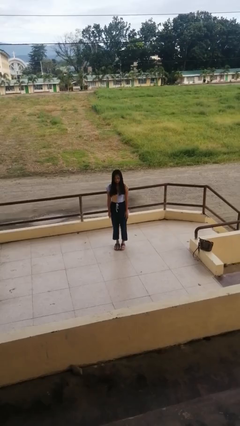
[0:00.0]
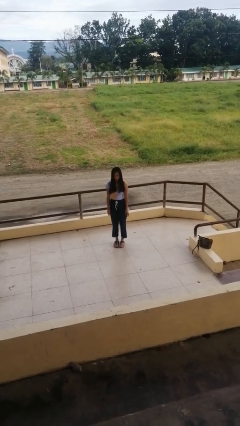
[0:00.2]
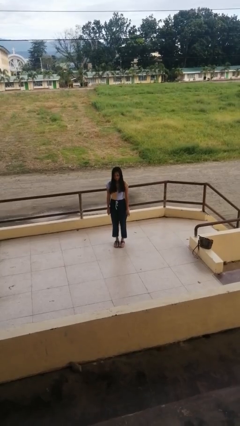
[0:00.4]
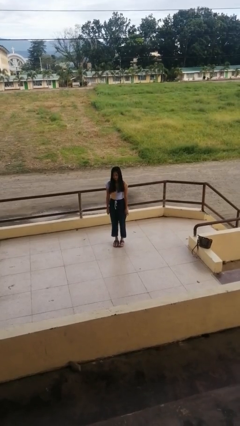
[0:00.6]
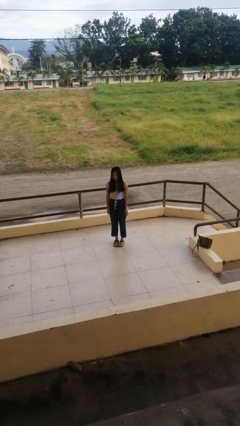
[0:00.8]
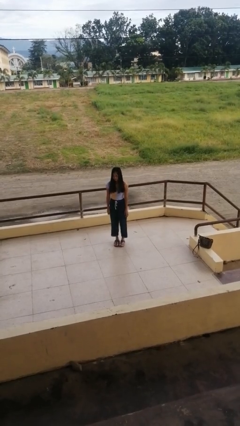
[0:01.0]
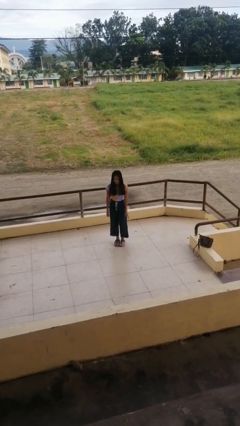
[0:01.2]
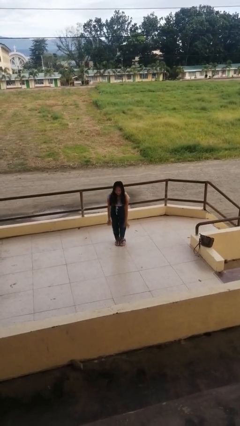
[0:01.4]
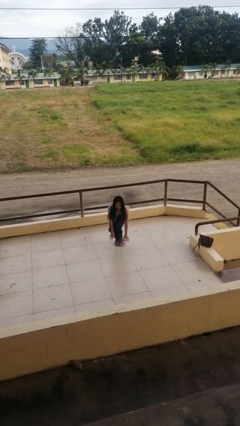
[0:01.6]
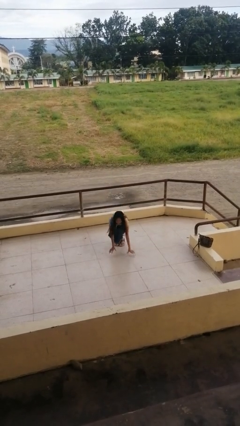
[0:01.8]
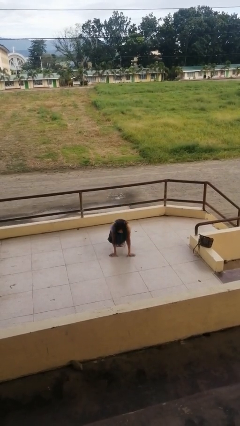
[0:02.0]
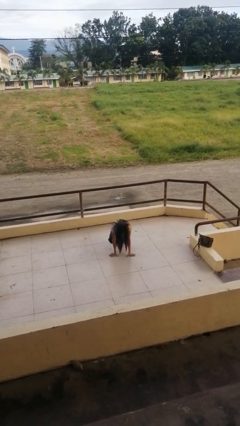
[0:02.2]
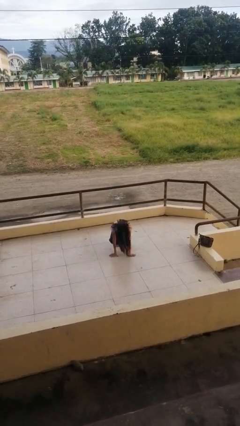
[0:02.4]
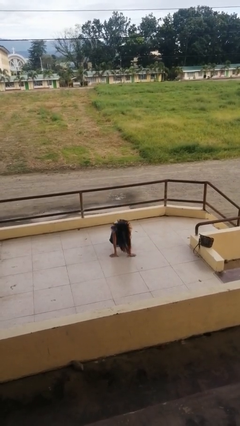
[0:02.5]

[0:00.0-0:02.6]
person falls while standing

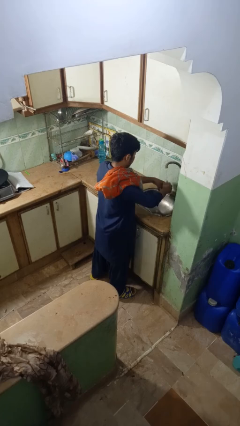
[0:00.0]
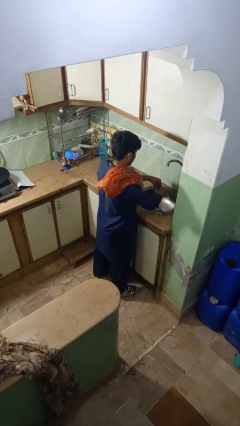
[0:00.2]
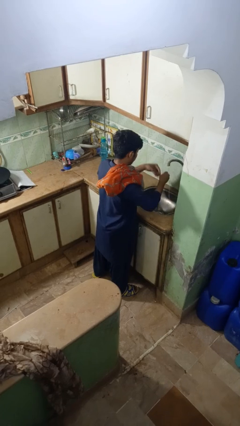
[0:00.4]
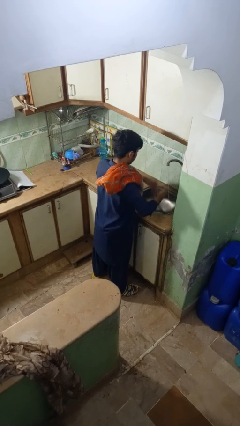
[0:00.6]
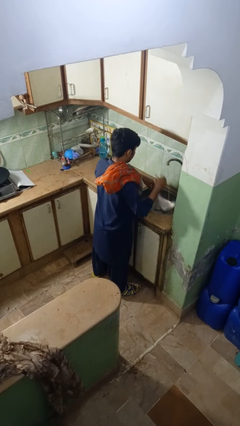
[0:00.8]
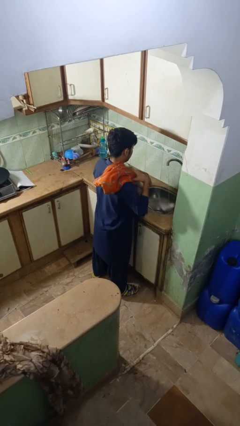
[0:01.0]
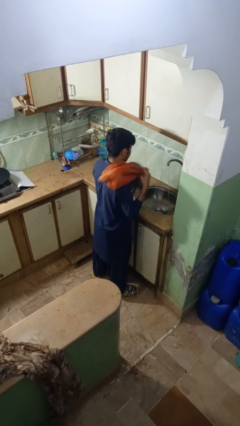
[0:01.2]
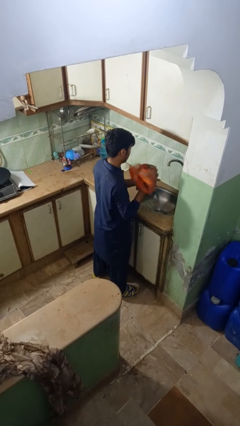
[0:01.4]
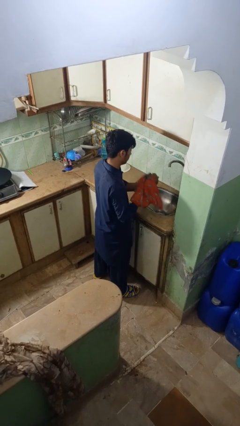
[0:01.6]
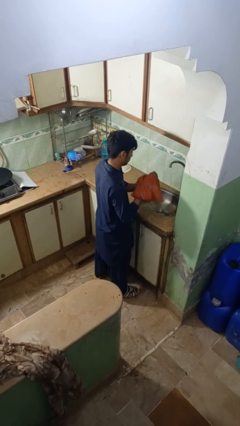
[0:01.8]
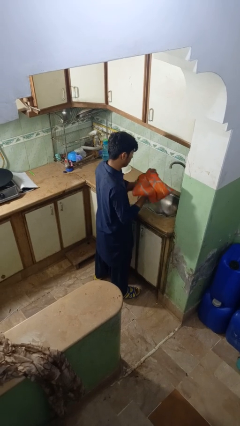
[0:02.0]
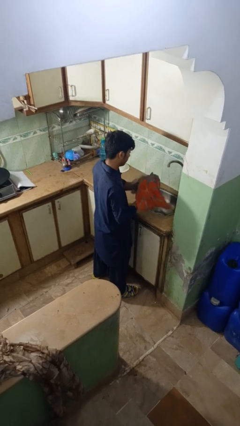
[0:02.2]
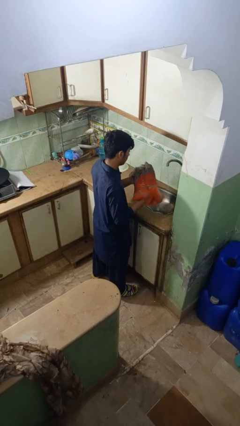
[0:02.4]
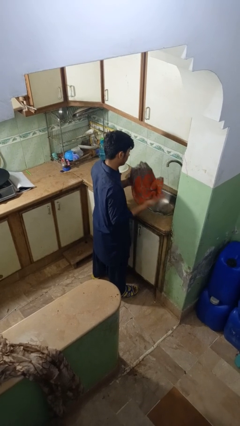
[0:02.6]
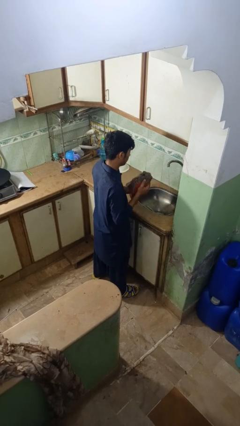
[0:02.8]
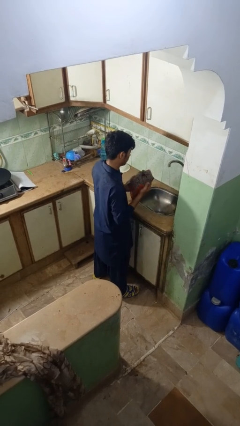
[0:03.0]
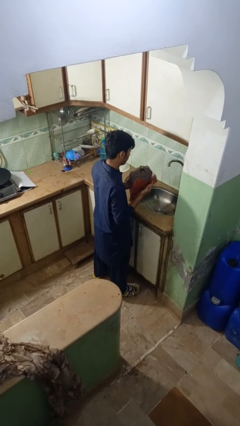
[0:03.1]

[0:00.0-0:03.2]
person dries hands with towel

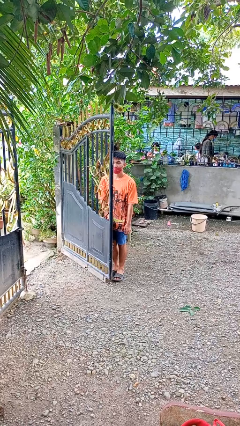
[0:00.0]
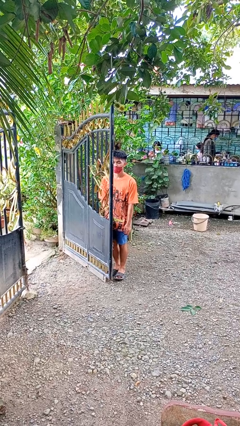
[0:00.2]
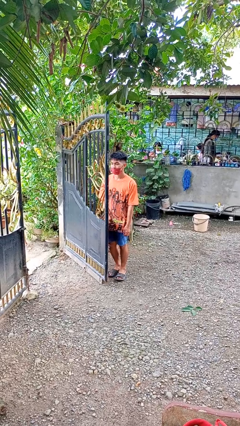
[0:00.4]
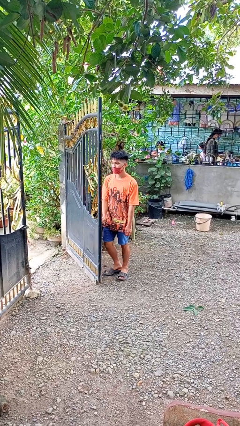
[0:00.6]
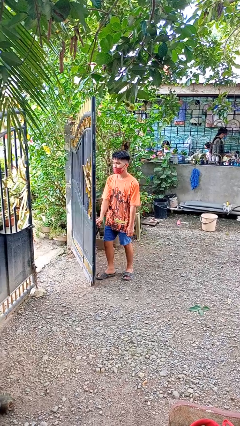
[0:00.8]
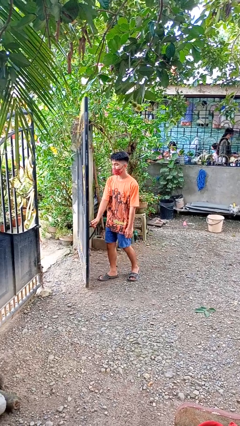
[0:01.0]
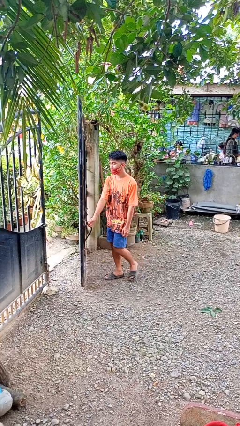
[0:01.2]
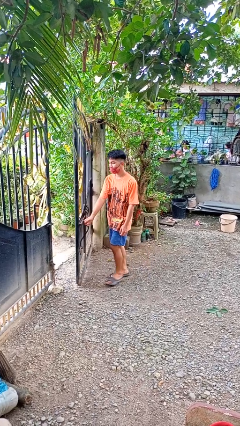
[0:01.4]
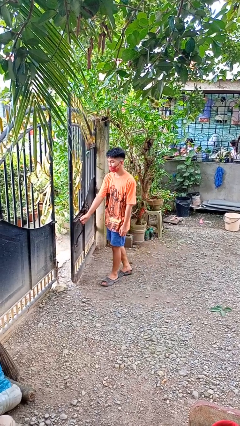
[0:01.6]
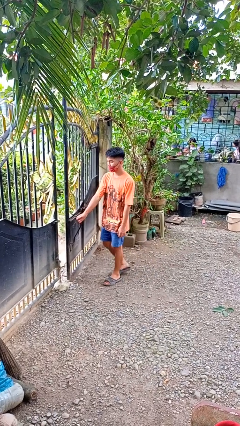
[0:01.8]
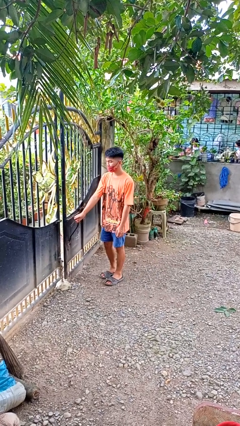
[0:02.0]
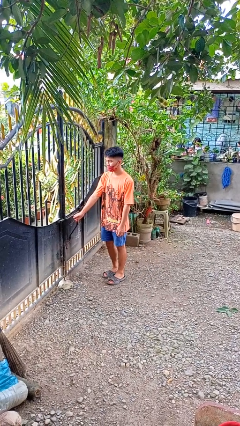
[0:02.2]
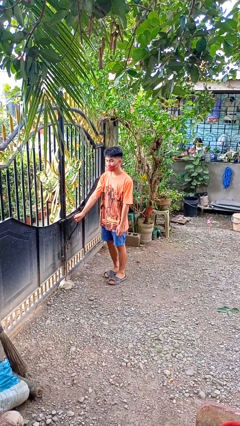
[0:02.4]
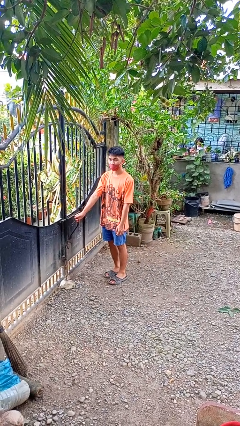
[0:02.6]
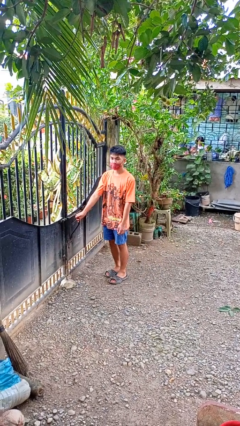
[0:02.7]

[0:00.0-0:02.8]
person closes gate

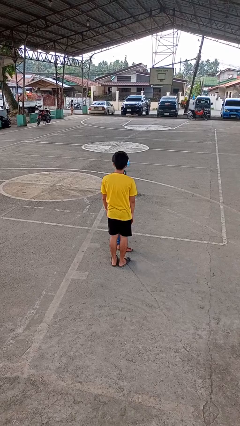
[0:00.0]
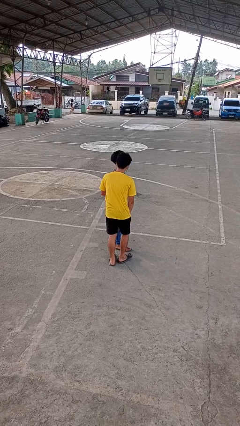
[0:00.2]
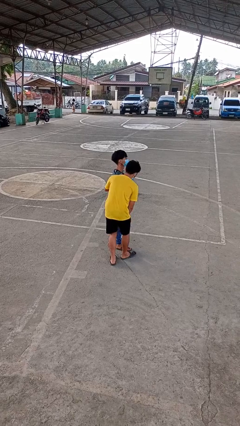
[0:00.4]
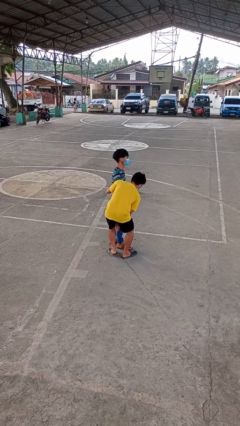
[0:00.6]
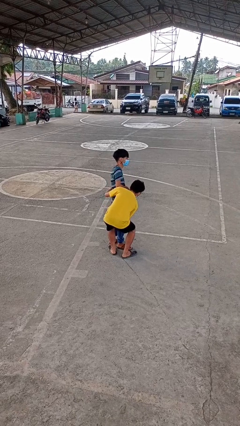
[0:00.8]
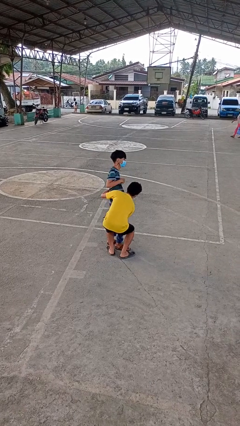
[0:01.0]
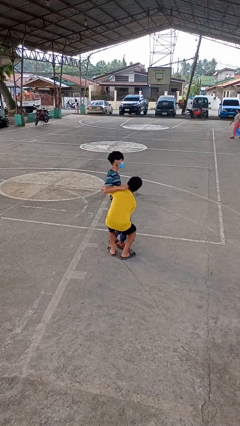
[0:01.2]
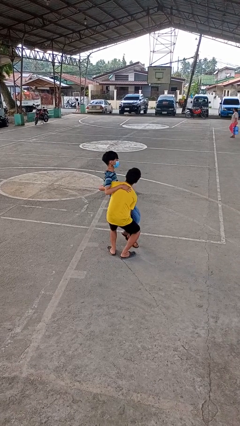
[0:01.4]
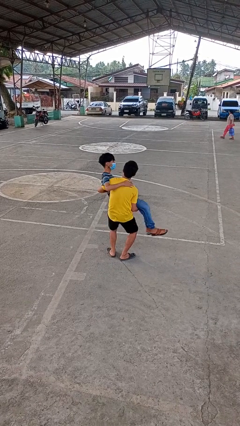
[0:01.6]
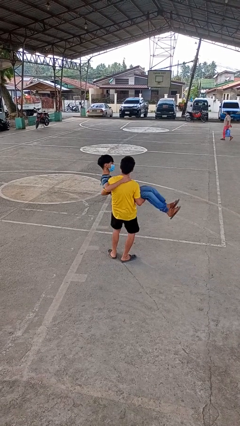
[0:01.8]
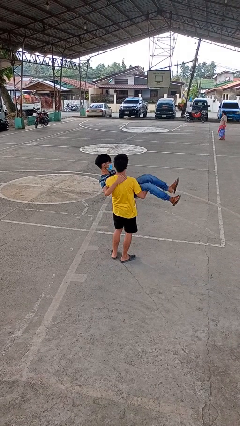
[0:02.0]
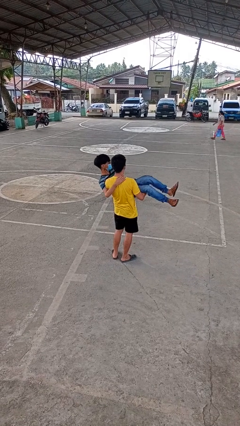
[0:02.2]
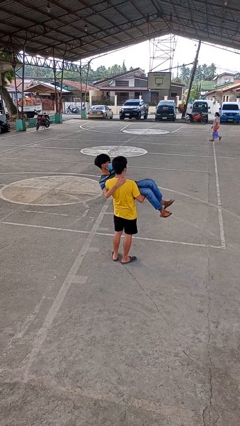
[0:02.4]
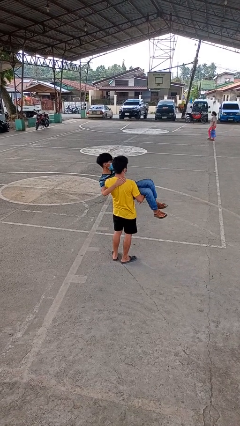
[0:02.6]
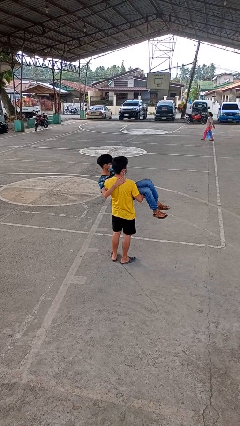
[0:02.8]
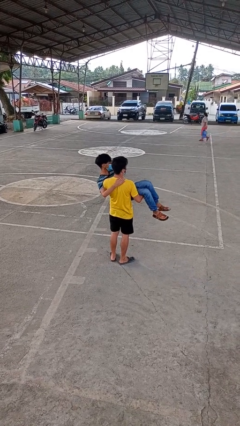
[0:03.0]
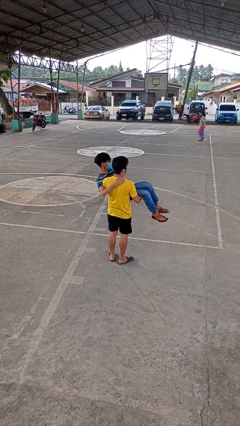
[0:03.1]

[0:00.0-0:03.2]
person picks up person

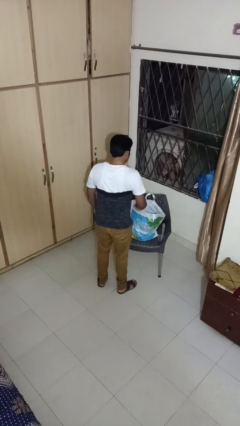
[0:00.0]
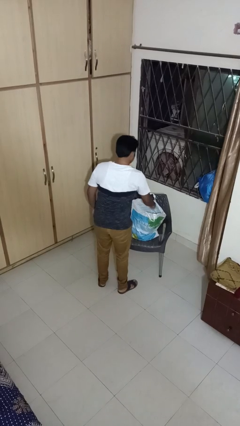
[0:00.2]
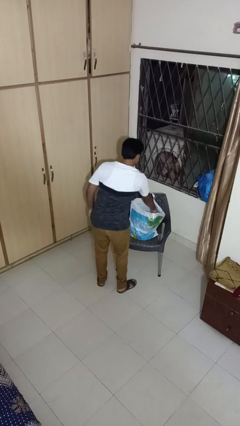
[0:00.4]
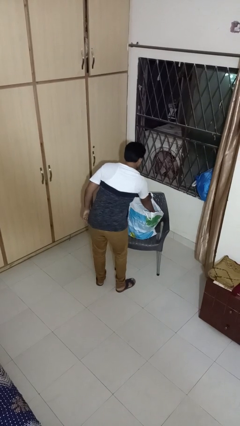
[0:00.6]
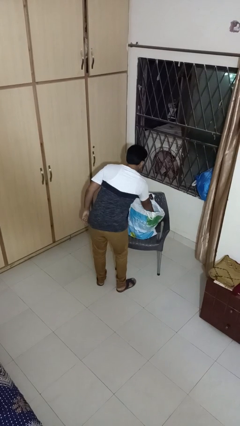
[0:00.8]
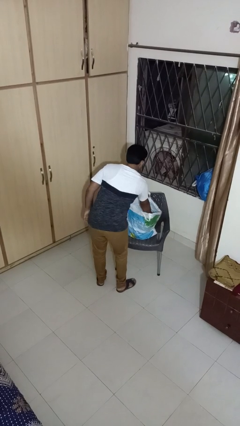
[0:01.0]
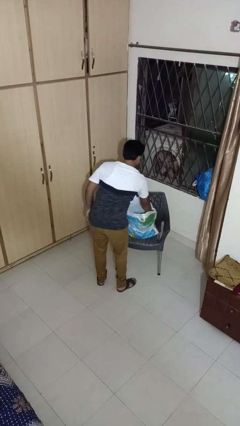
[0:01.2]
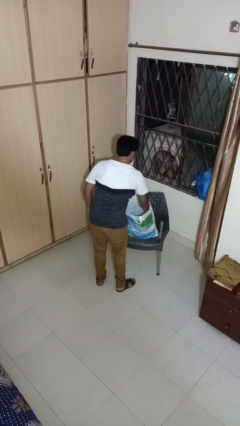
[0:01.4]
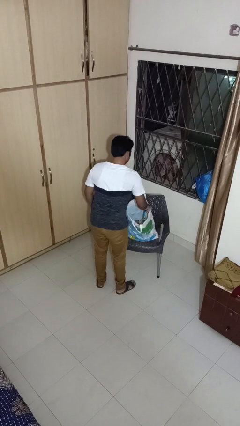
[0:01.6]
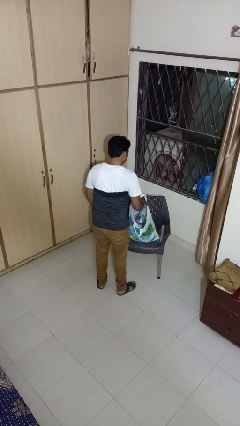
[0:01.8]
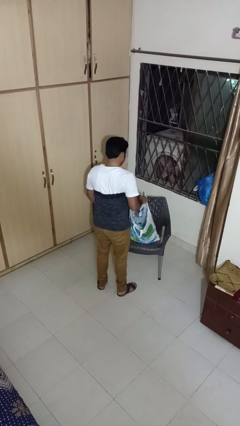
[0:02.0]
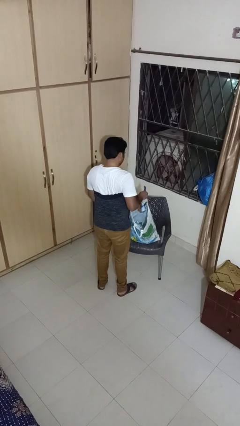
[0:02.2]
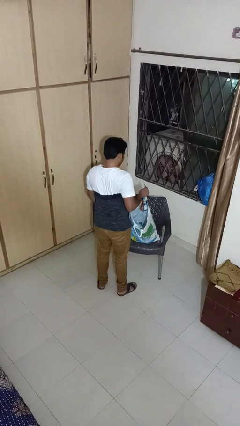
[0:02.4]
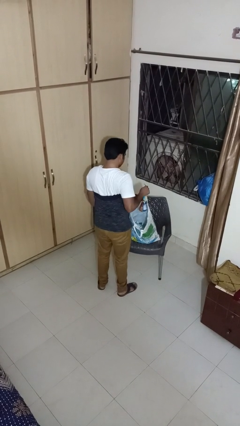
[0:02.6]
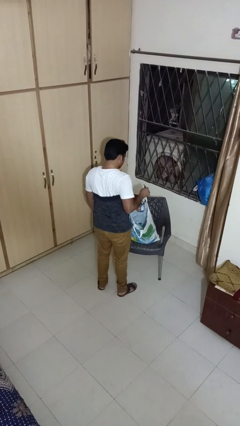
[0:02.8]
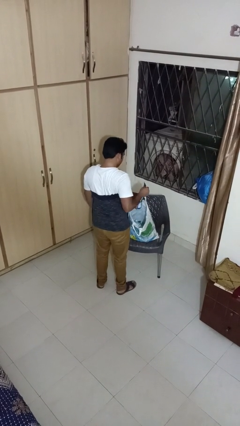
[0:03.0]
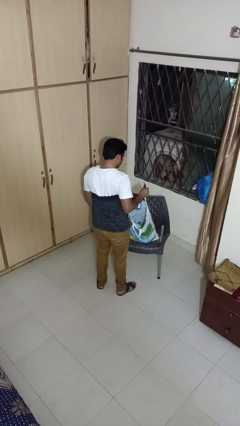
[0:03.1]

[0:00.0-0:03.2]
person takes object from bag

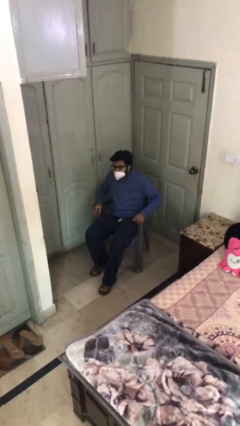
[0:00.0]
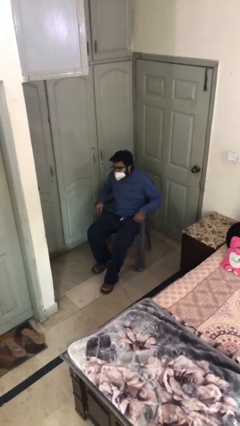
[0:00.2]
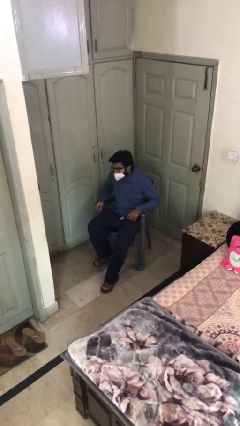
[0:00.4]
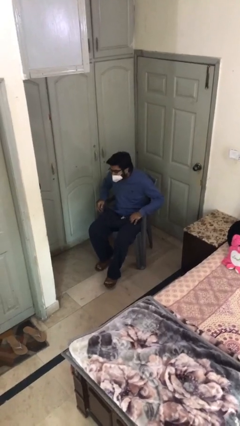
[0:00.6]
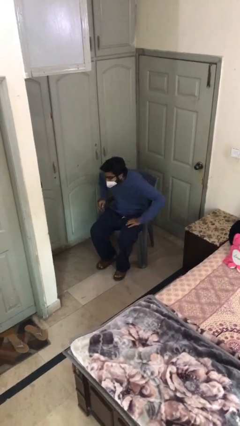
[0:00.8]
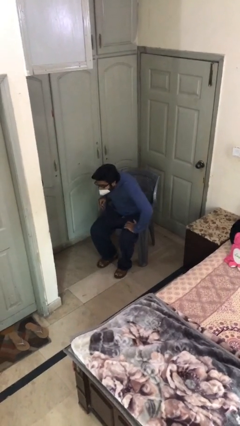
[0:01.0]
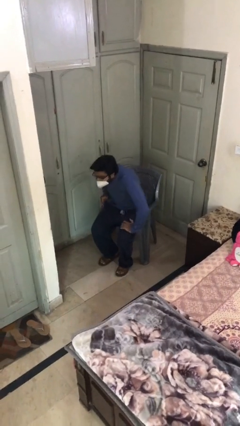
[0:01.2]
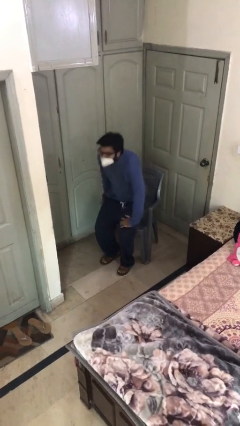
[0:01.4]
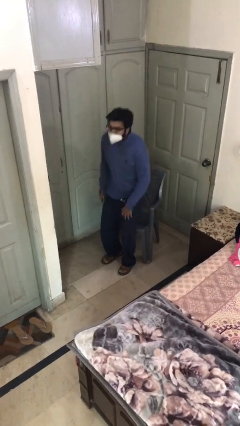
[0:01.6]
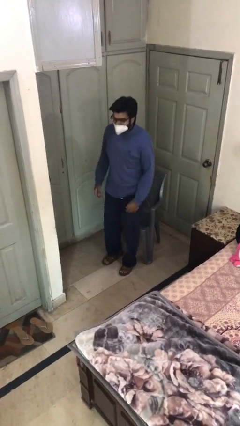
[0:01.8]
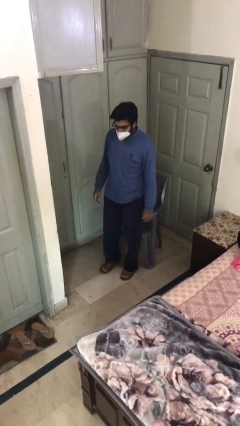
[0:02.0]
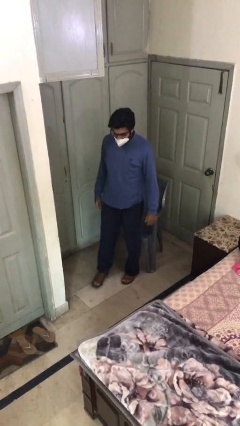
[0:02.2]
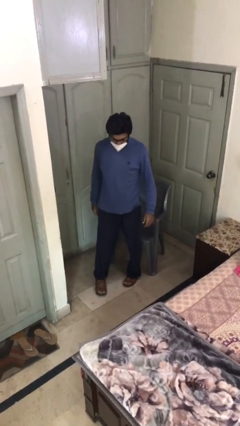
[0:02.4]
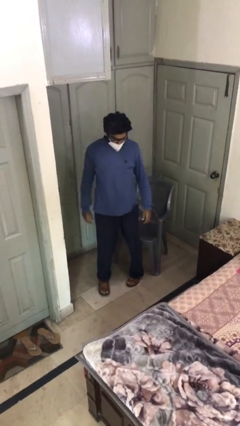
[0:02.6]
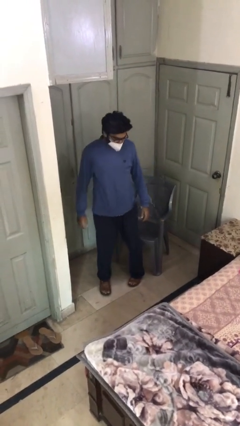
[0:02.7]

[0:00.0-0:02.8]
person stands up
